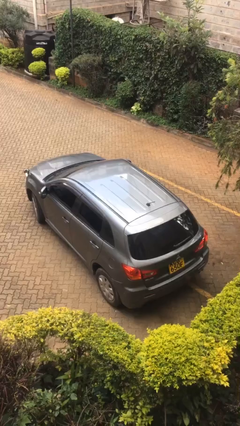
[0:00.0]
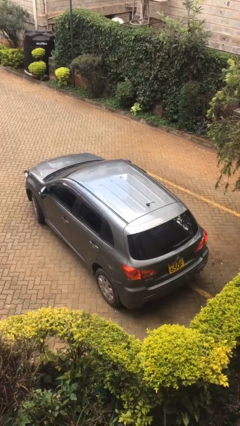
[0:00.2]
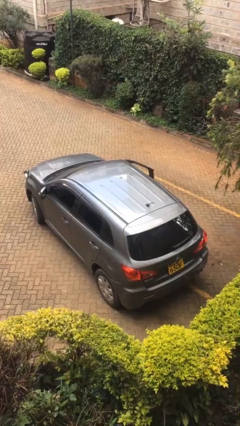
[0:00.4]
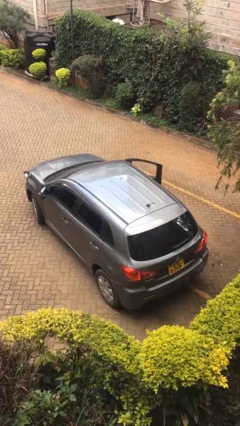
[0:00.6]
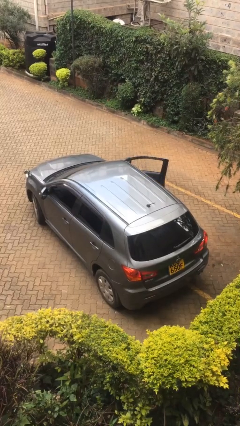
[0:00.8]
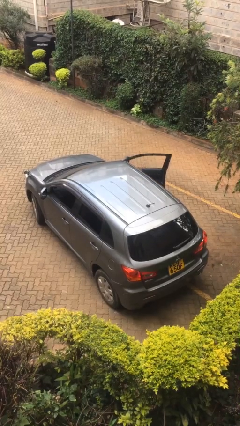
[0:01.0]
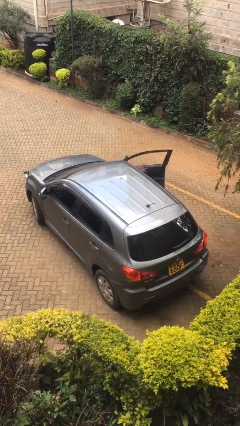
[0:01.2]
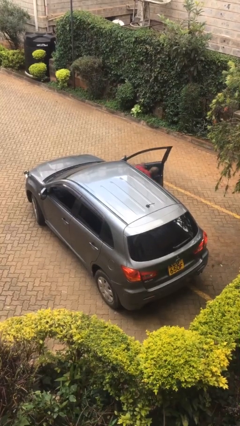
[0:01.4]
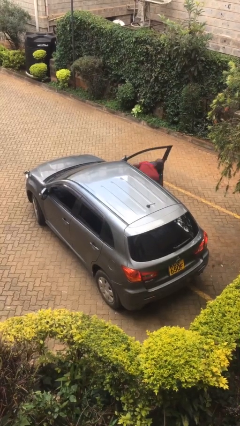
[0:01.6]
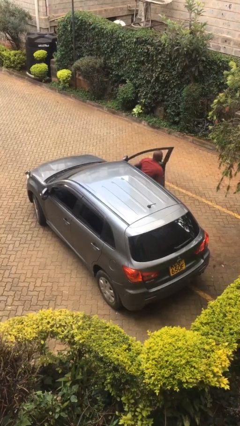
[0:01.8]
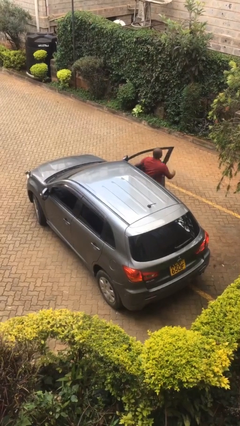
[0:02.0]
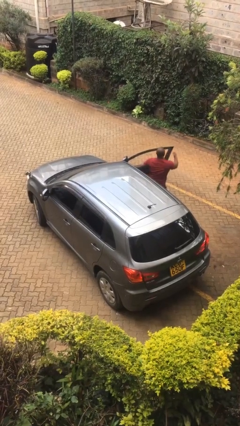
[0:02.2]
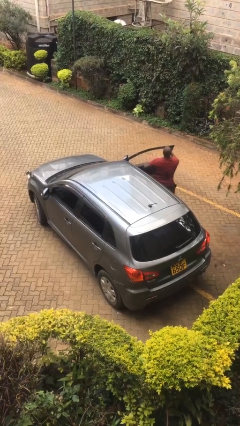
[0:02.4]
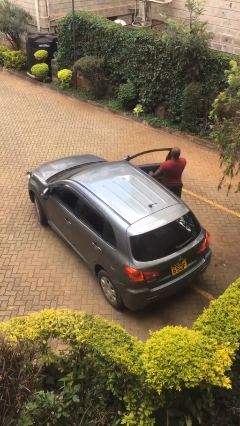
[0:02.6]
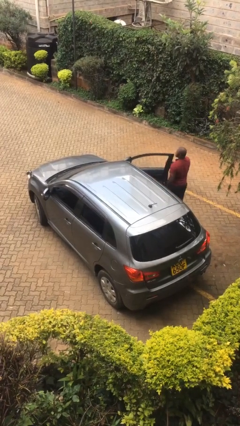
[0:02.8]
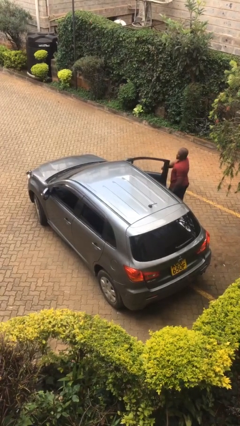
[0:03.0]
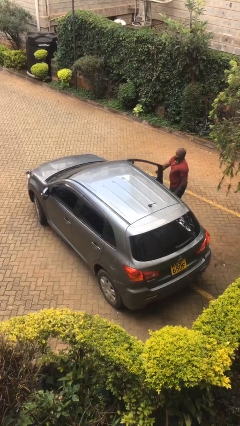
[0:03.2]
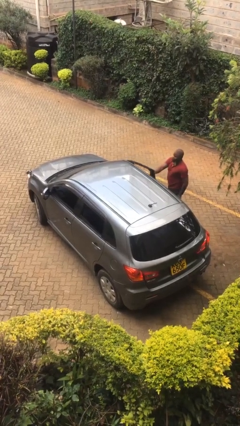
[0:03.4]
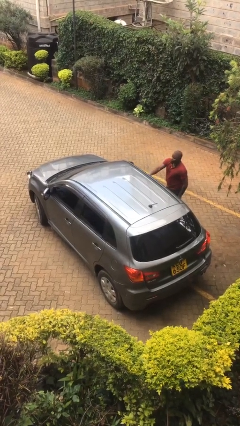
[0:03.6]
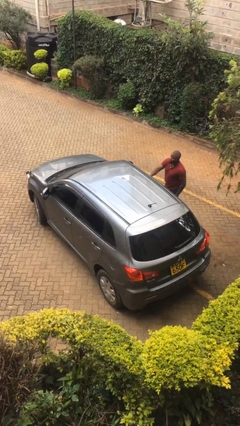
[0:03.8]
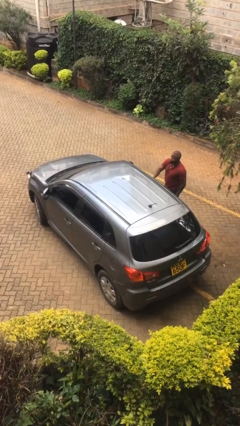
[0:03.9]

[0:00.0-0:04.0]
car drops off person

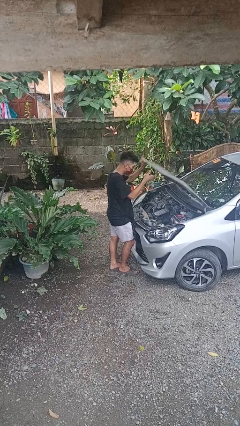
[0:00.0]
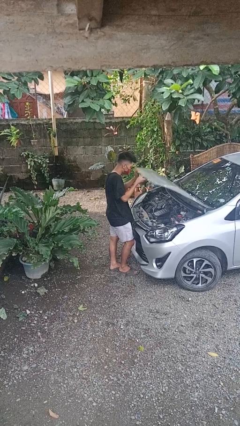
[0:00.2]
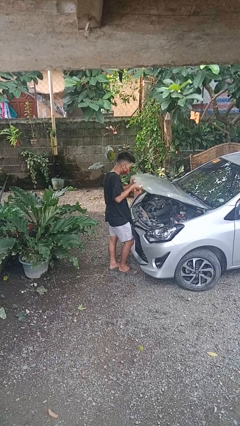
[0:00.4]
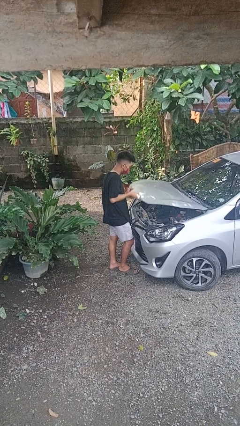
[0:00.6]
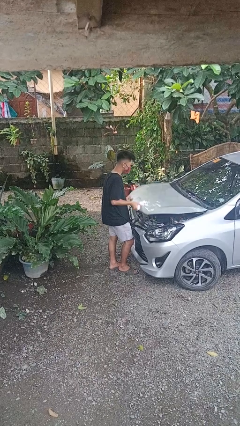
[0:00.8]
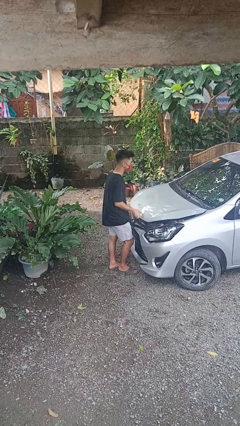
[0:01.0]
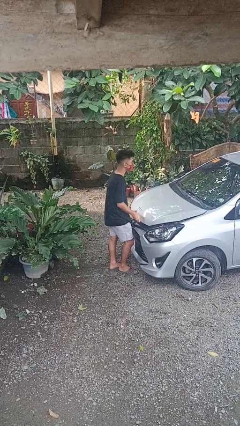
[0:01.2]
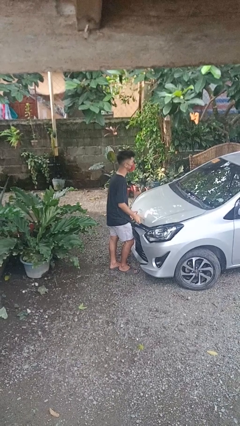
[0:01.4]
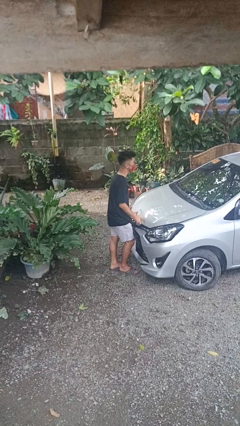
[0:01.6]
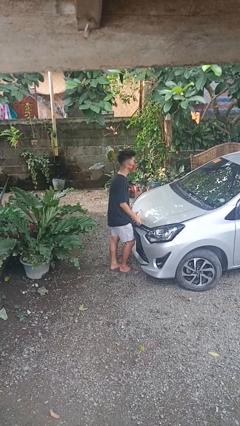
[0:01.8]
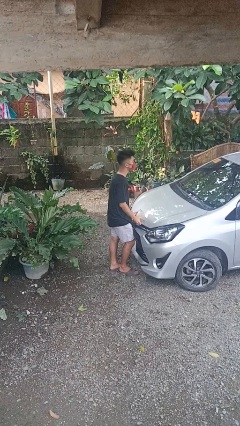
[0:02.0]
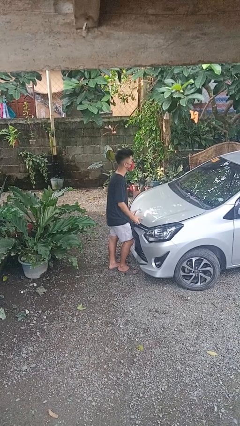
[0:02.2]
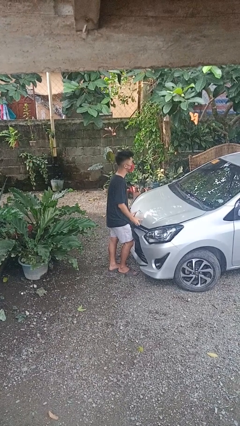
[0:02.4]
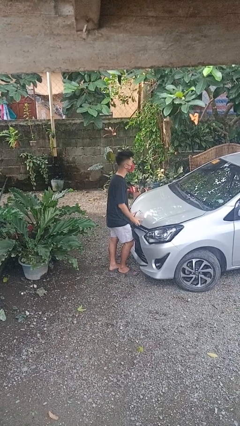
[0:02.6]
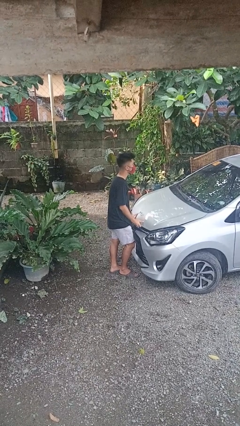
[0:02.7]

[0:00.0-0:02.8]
person closes car hood

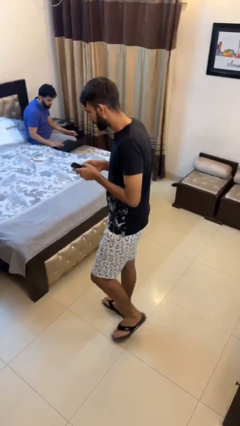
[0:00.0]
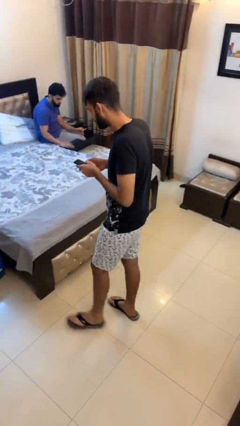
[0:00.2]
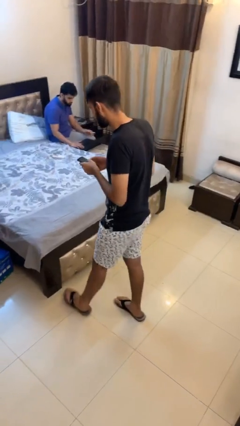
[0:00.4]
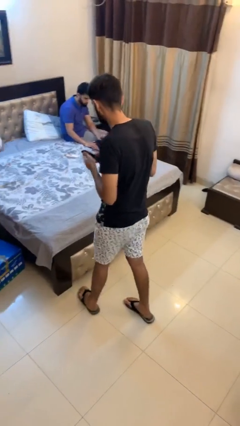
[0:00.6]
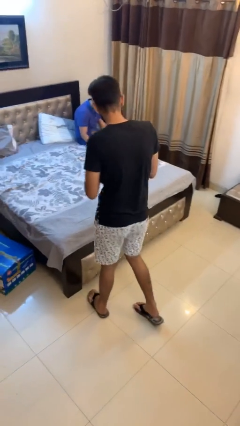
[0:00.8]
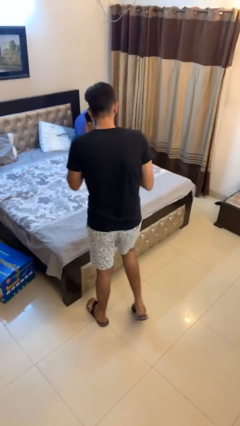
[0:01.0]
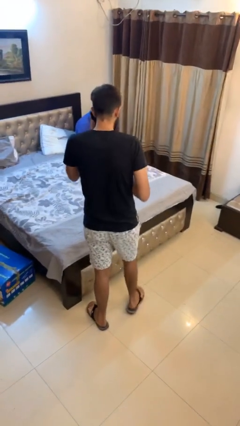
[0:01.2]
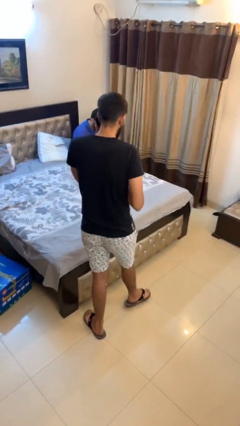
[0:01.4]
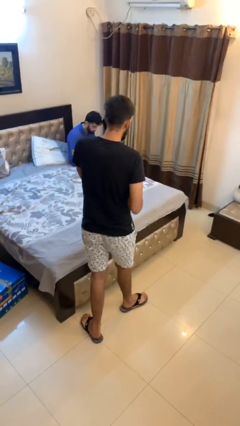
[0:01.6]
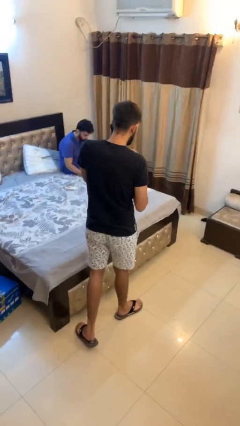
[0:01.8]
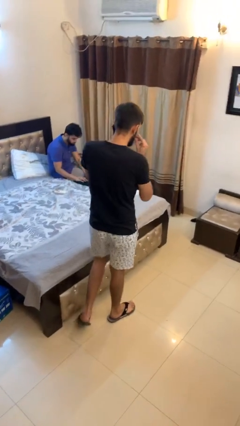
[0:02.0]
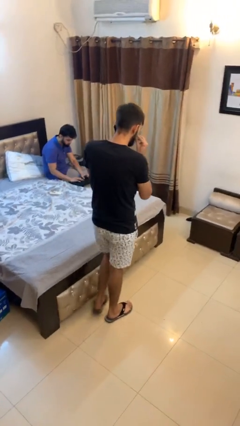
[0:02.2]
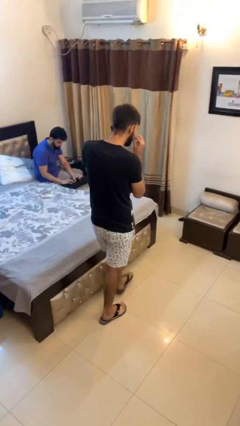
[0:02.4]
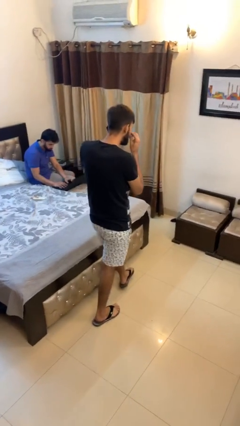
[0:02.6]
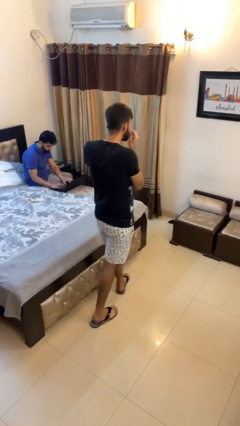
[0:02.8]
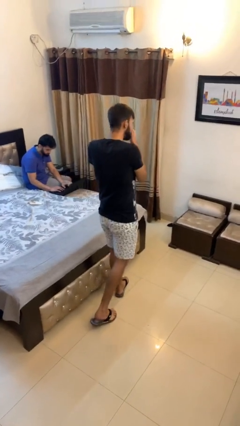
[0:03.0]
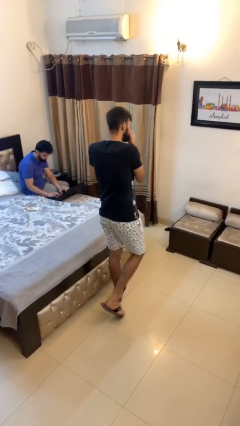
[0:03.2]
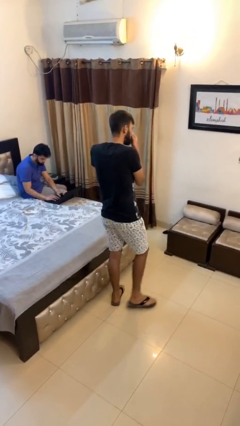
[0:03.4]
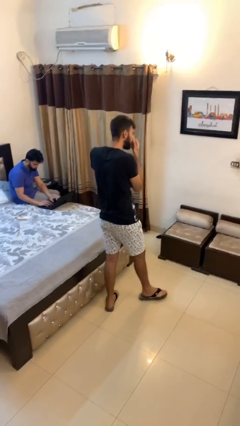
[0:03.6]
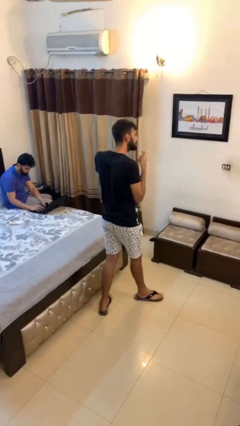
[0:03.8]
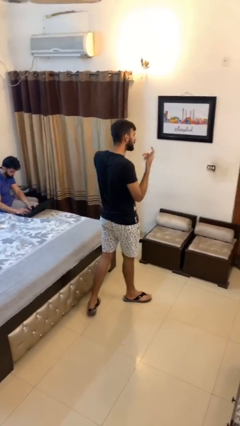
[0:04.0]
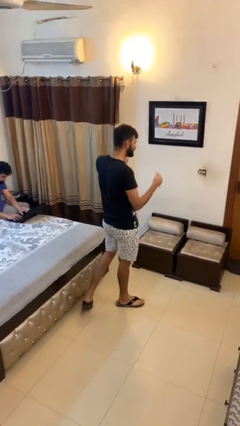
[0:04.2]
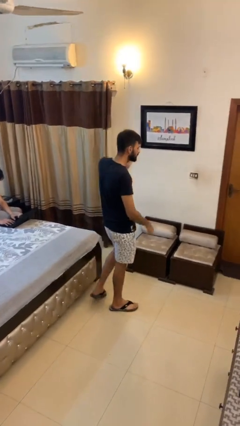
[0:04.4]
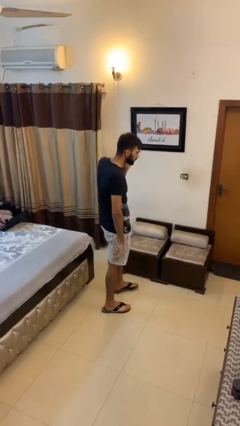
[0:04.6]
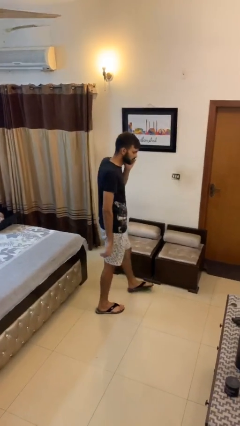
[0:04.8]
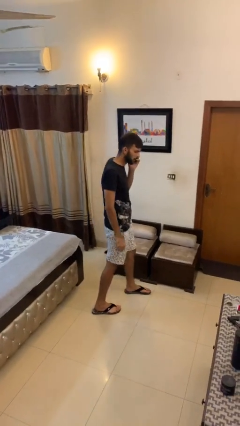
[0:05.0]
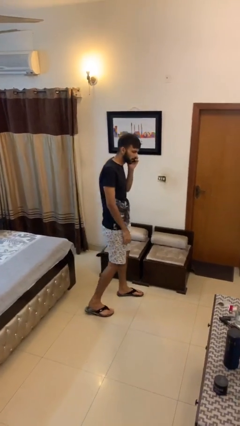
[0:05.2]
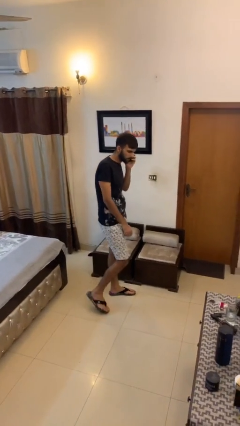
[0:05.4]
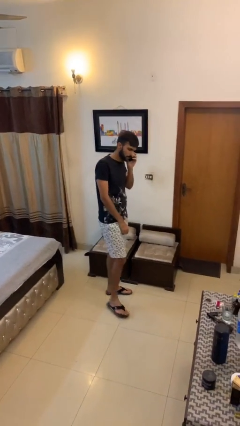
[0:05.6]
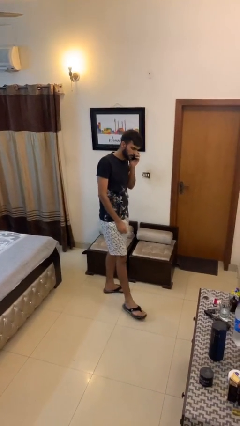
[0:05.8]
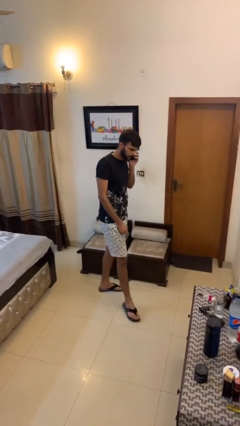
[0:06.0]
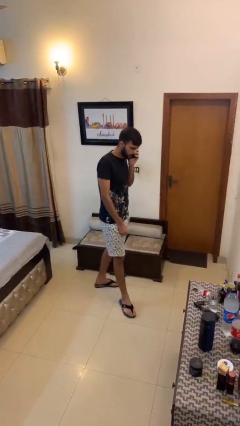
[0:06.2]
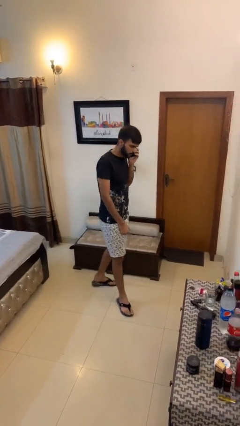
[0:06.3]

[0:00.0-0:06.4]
person talks on phone

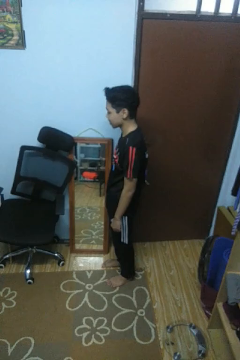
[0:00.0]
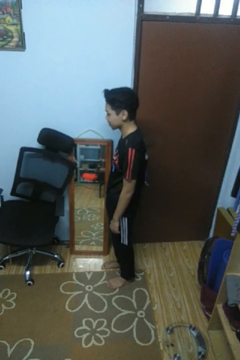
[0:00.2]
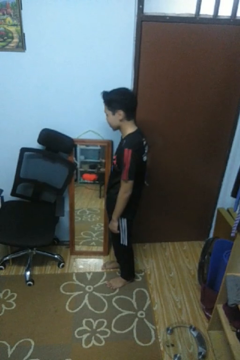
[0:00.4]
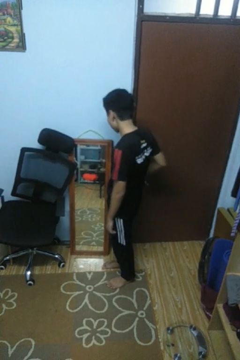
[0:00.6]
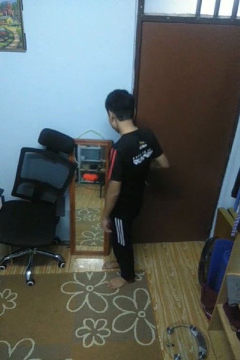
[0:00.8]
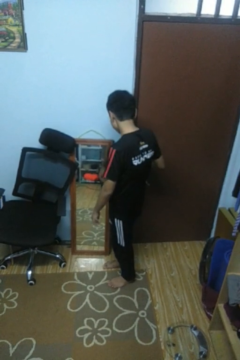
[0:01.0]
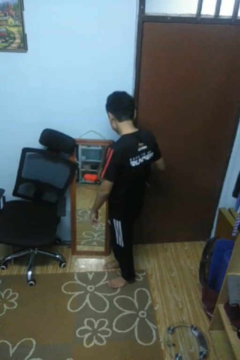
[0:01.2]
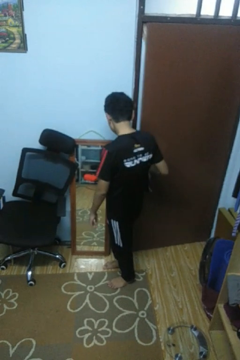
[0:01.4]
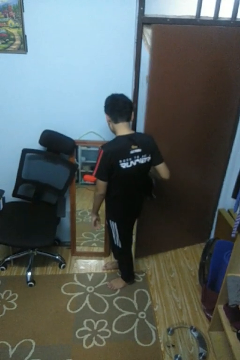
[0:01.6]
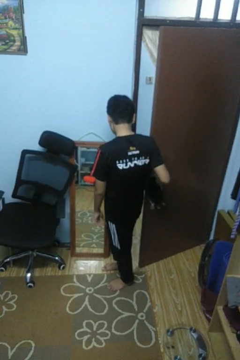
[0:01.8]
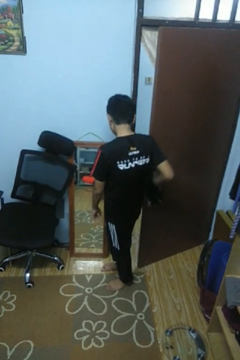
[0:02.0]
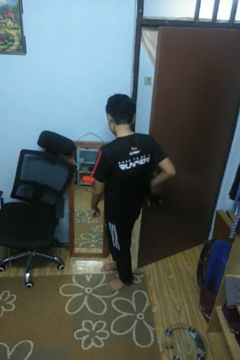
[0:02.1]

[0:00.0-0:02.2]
person opens facility door

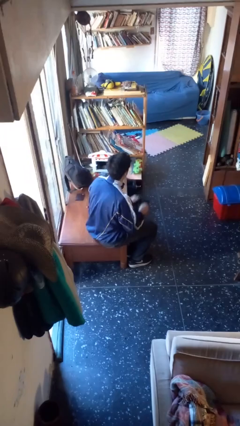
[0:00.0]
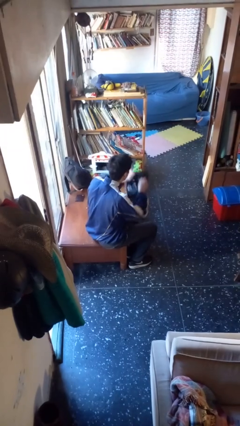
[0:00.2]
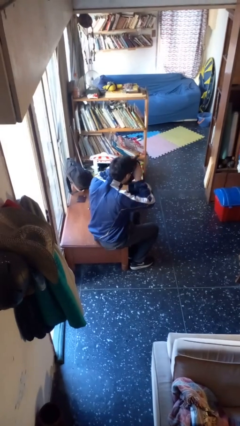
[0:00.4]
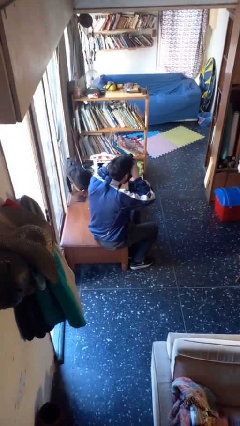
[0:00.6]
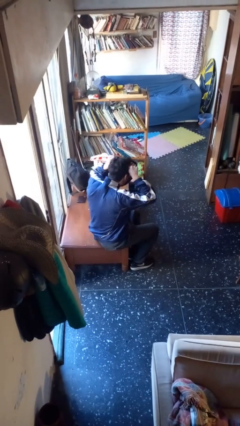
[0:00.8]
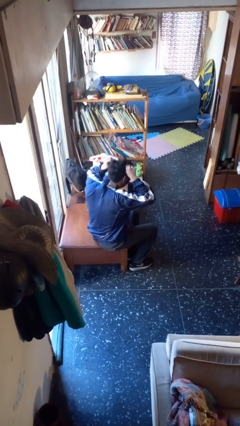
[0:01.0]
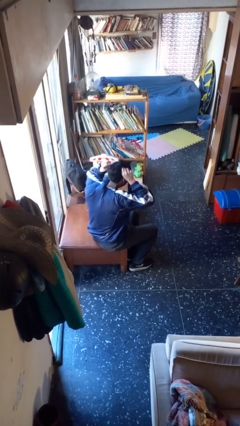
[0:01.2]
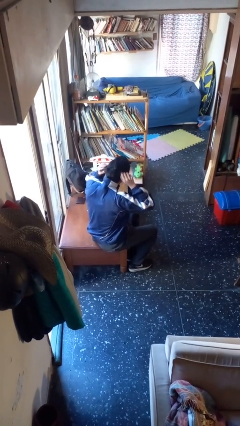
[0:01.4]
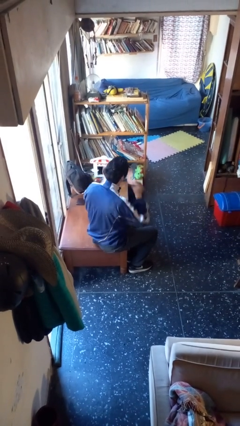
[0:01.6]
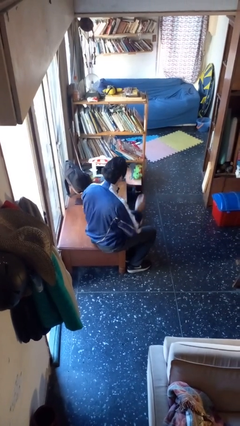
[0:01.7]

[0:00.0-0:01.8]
person puts on facemask

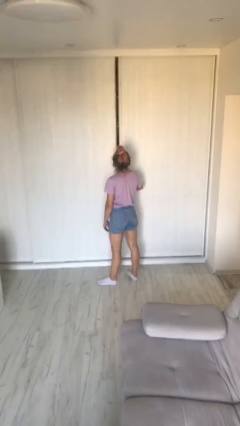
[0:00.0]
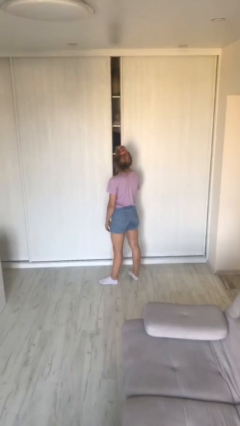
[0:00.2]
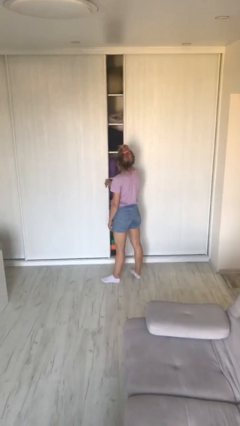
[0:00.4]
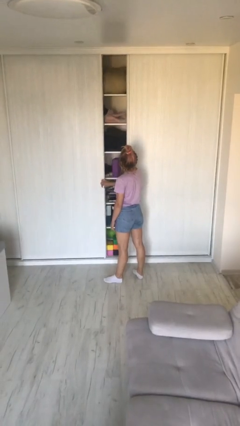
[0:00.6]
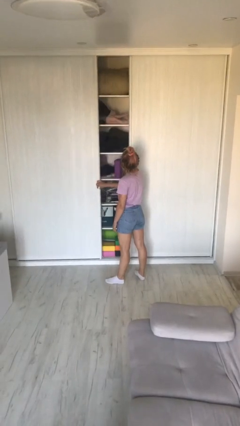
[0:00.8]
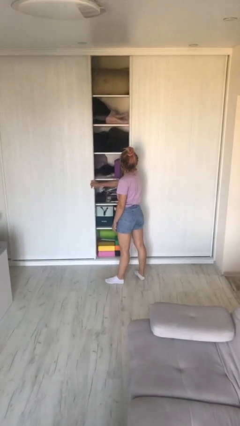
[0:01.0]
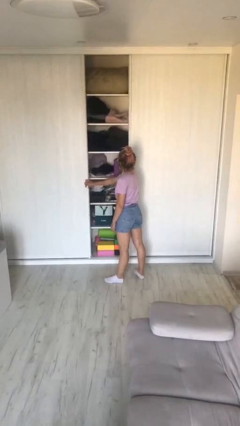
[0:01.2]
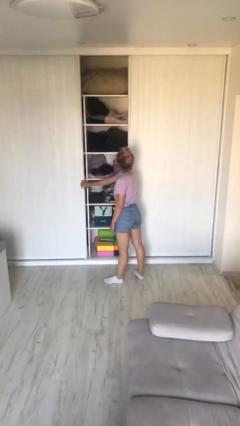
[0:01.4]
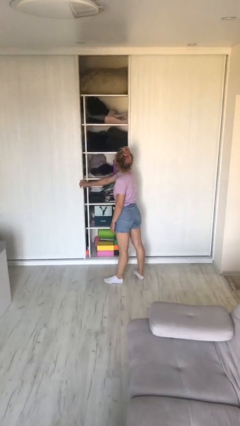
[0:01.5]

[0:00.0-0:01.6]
person opens sliding door
